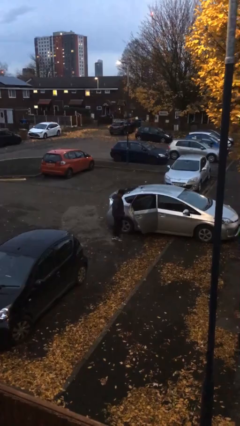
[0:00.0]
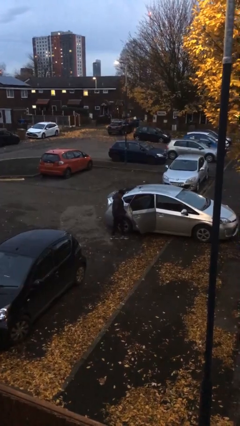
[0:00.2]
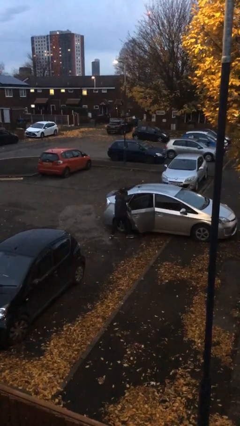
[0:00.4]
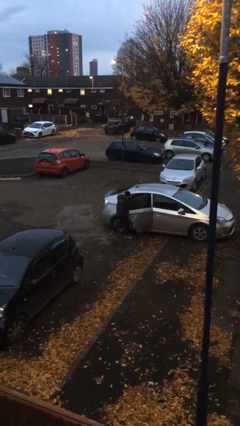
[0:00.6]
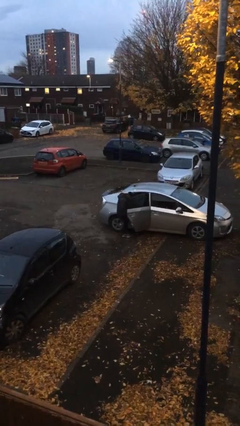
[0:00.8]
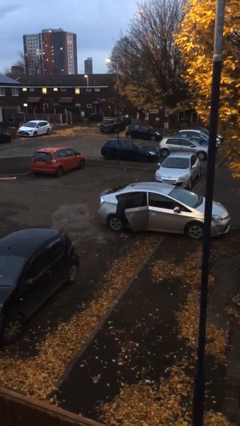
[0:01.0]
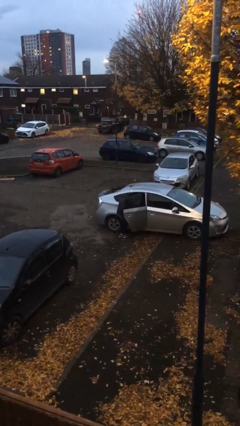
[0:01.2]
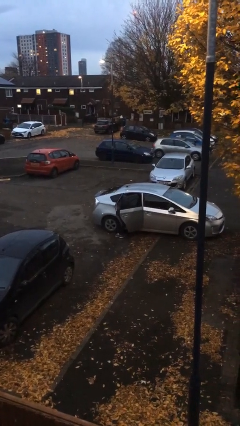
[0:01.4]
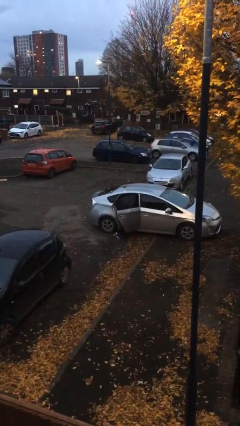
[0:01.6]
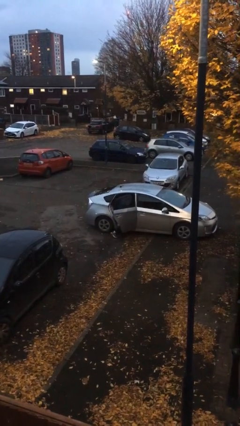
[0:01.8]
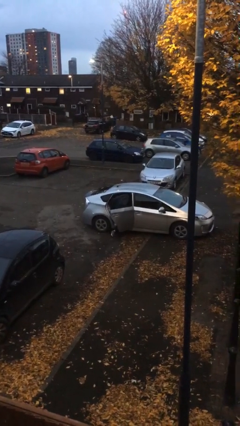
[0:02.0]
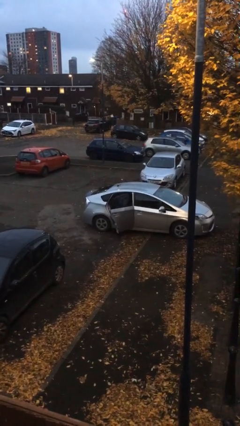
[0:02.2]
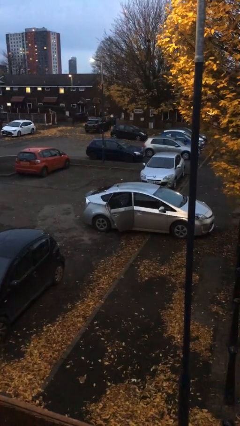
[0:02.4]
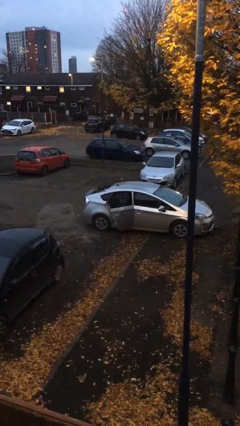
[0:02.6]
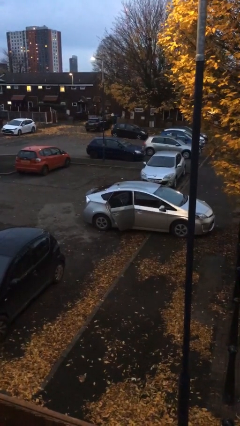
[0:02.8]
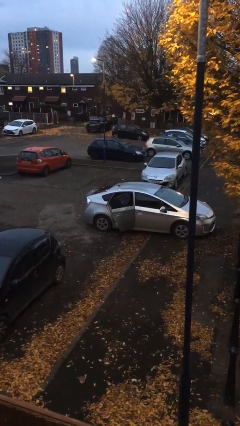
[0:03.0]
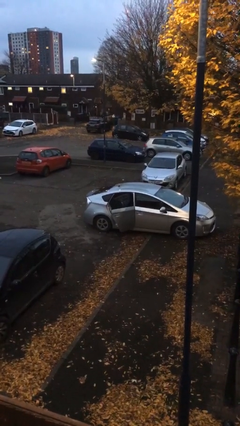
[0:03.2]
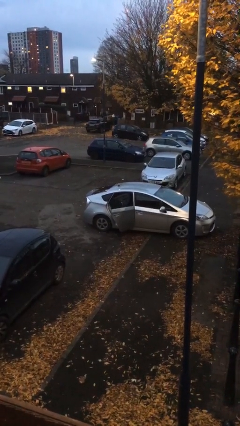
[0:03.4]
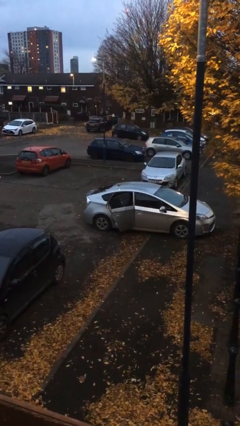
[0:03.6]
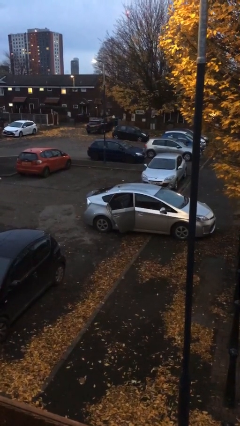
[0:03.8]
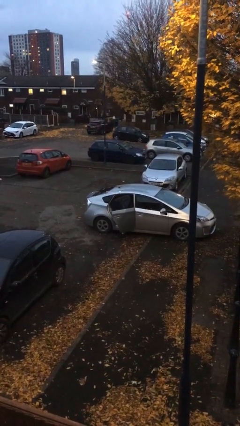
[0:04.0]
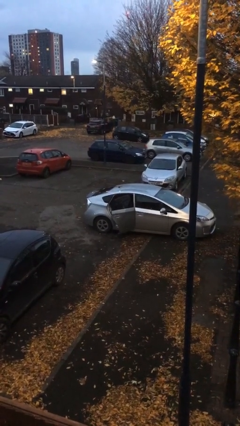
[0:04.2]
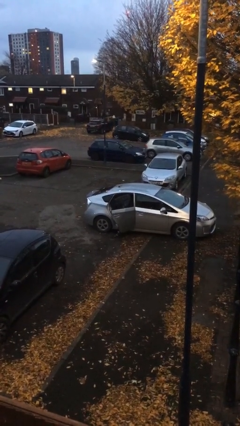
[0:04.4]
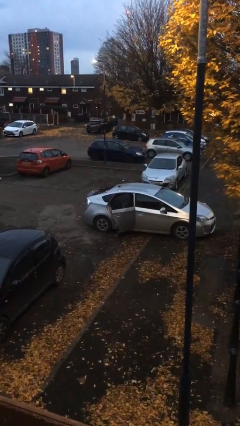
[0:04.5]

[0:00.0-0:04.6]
person enters car

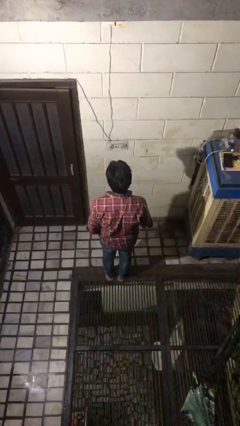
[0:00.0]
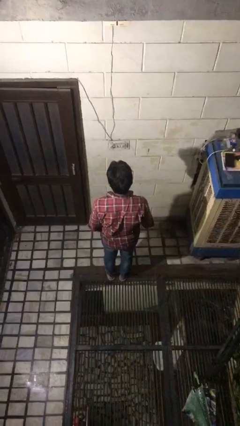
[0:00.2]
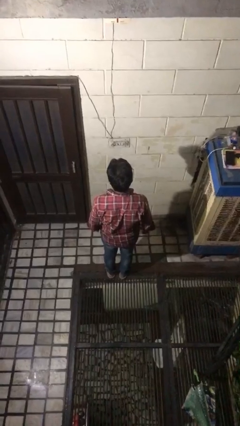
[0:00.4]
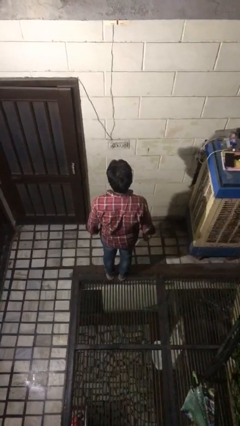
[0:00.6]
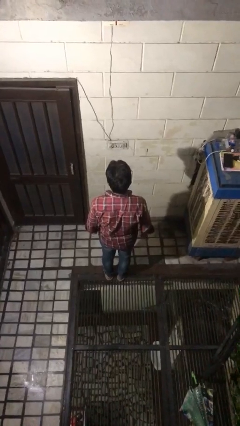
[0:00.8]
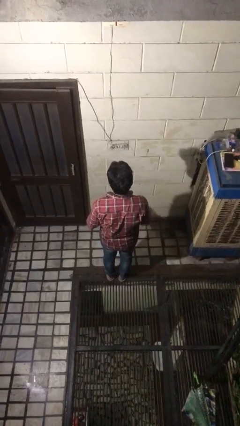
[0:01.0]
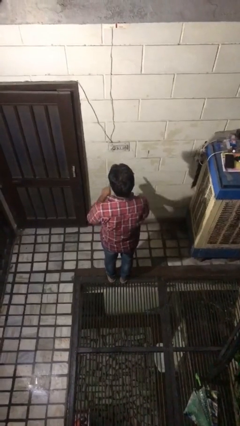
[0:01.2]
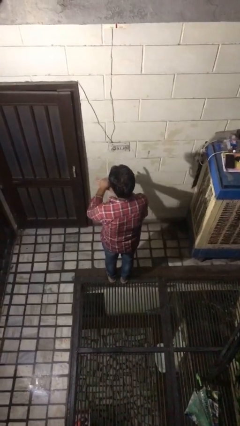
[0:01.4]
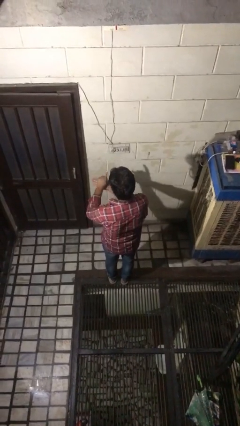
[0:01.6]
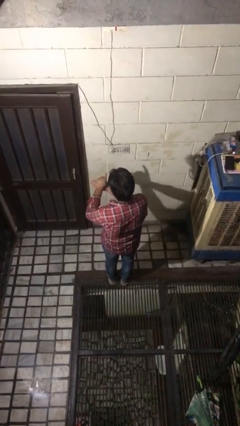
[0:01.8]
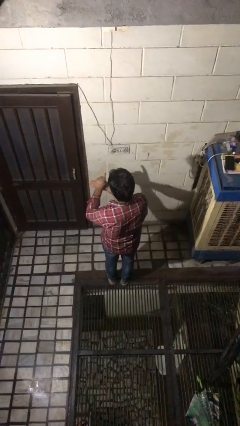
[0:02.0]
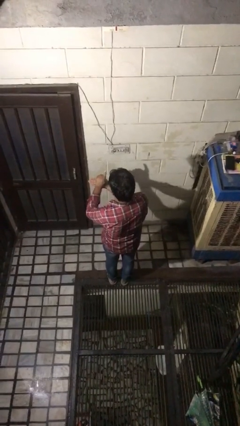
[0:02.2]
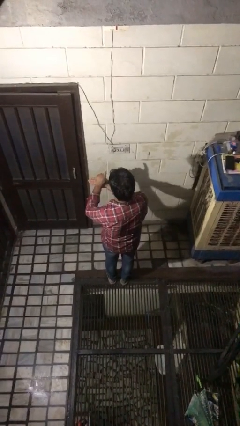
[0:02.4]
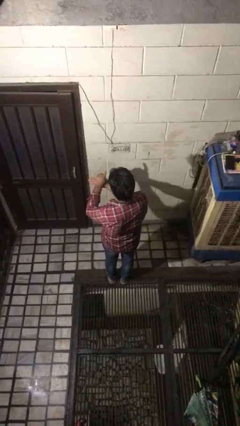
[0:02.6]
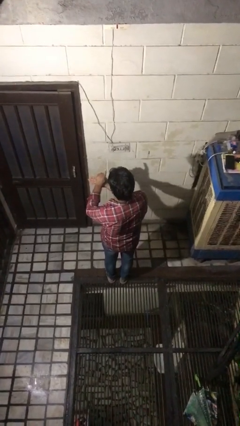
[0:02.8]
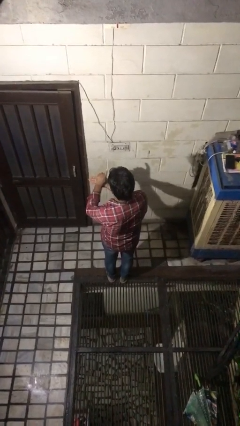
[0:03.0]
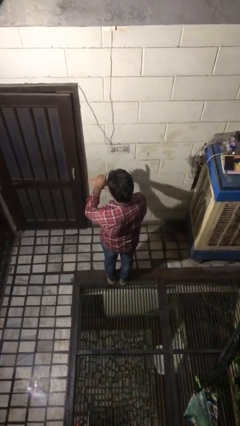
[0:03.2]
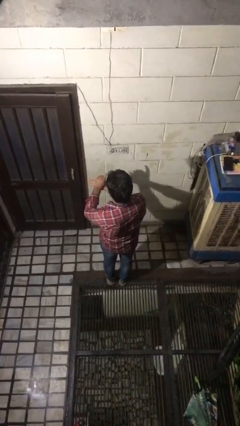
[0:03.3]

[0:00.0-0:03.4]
person gestures number one

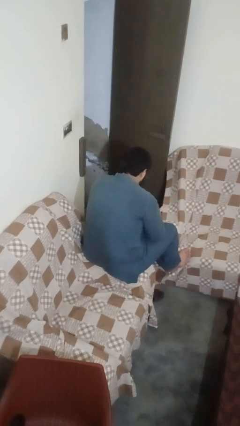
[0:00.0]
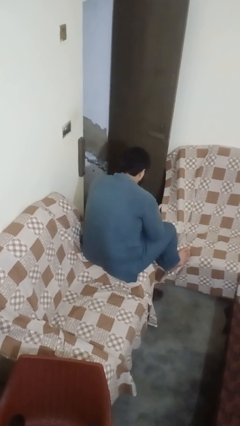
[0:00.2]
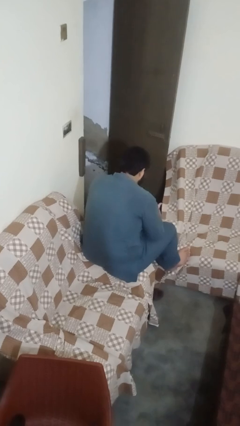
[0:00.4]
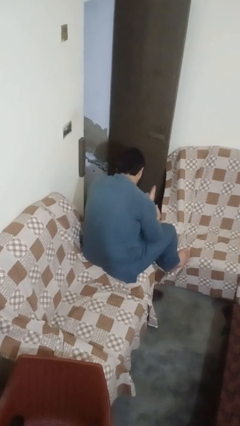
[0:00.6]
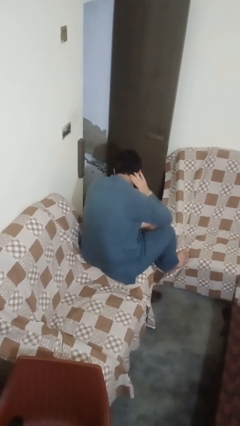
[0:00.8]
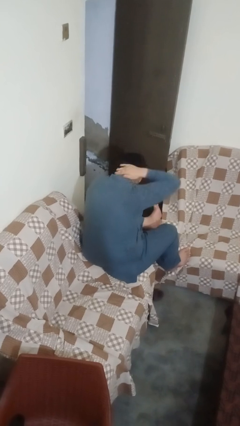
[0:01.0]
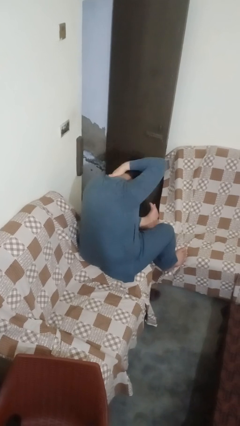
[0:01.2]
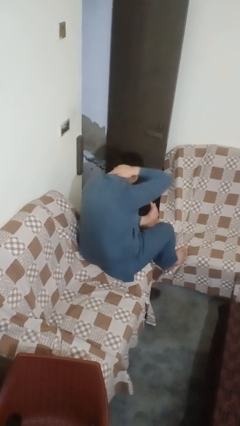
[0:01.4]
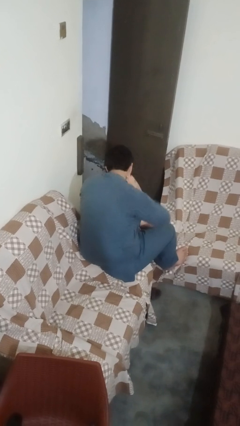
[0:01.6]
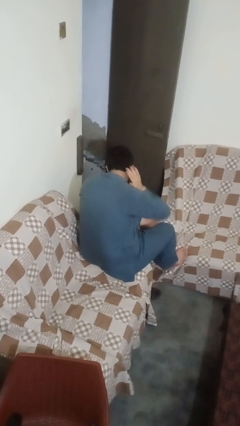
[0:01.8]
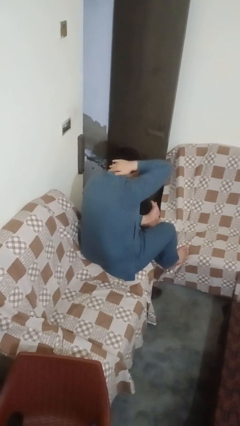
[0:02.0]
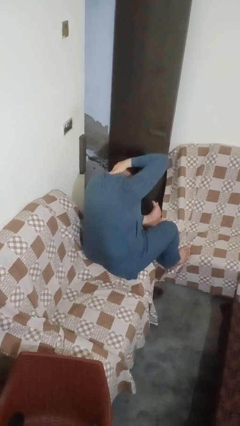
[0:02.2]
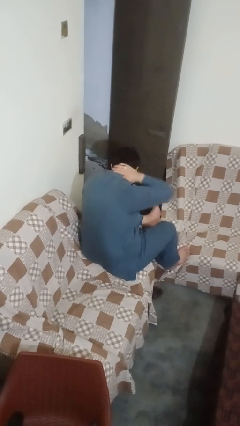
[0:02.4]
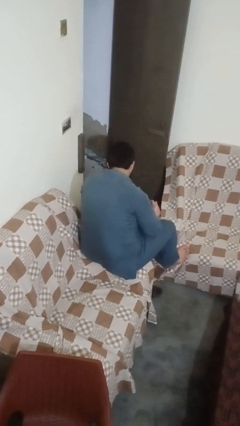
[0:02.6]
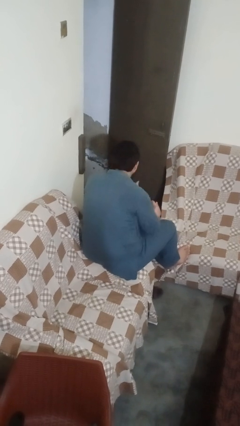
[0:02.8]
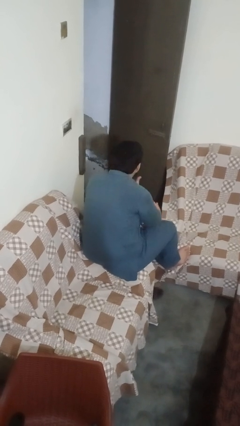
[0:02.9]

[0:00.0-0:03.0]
person rubs neck

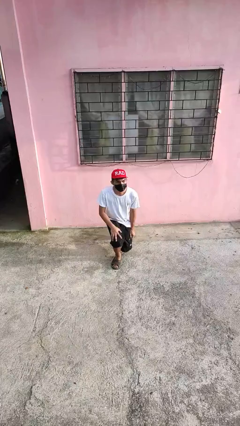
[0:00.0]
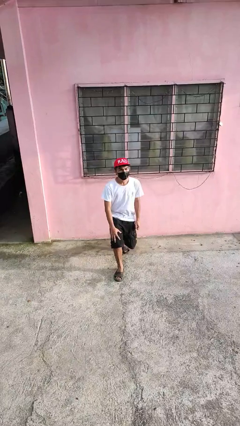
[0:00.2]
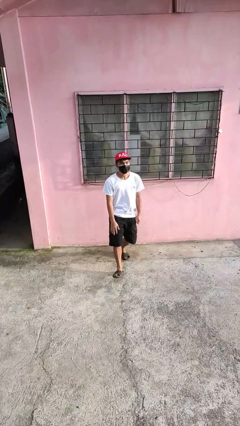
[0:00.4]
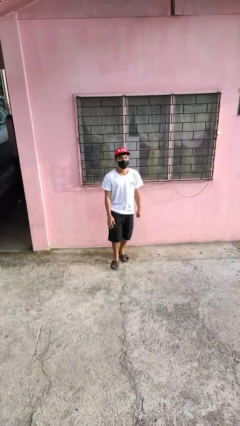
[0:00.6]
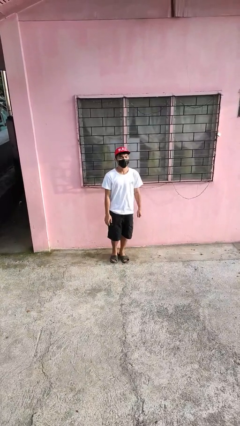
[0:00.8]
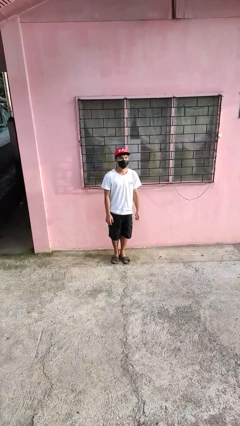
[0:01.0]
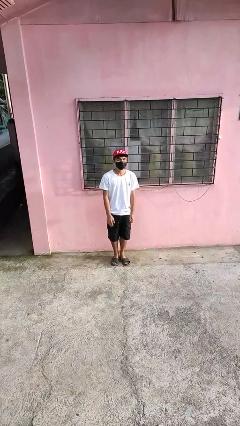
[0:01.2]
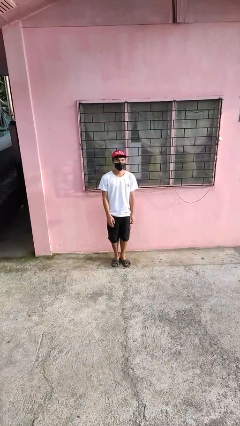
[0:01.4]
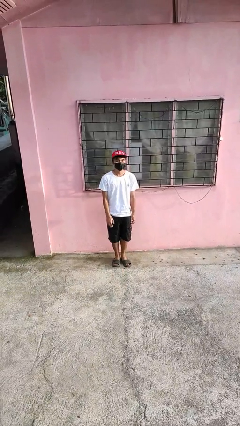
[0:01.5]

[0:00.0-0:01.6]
person stands up from floor

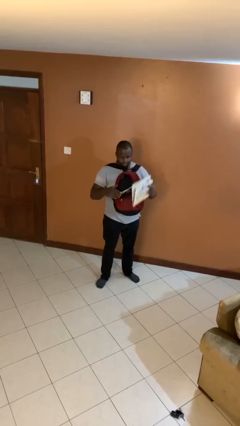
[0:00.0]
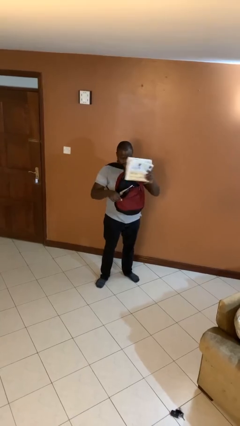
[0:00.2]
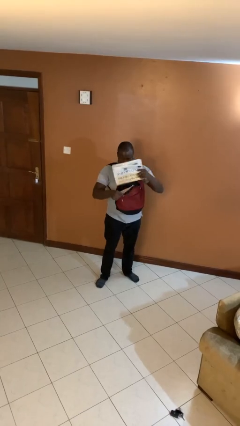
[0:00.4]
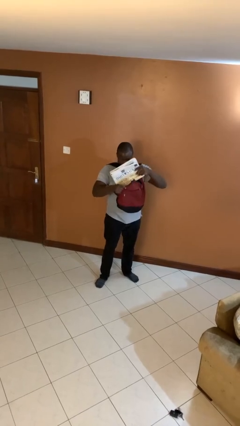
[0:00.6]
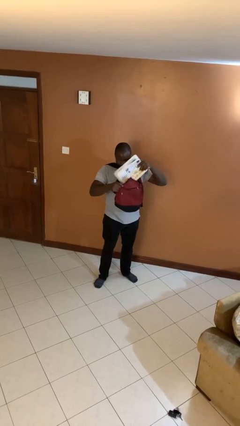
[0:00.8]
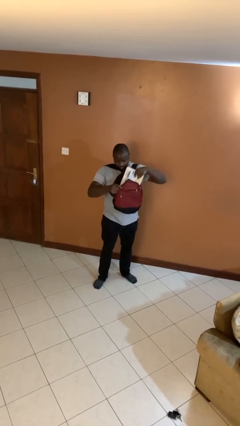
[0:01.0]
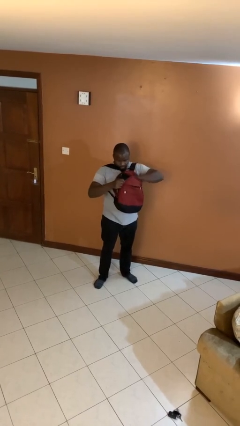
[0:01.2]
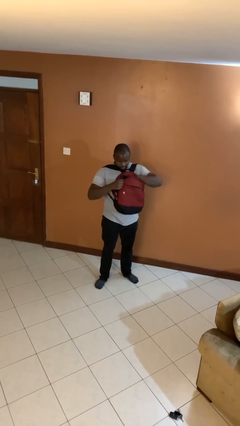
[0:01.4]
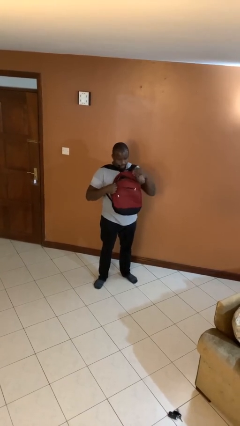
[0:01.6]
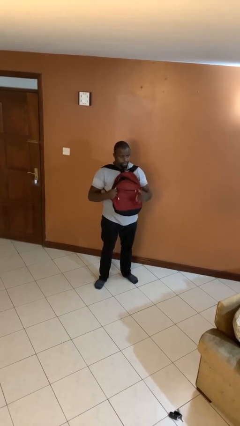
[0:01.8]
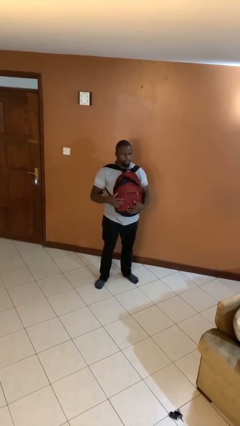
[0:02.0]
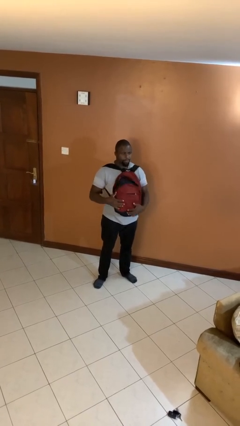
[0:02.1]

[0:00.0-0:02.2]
person puts object into backpack

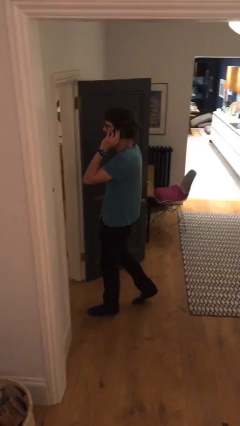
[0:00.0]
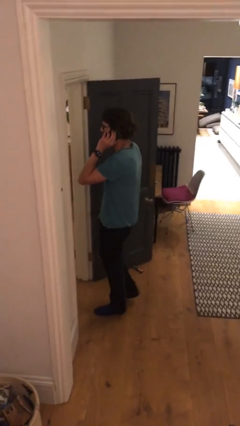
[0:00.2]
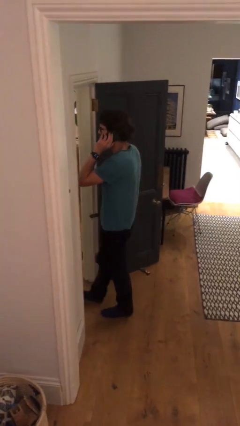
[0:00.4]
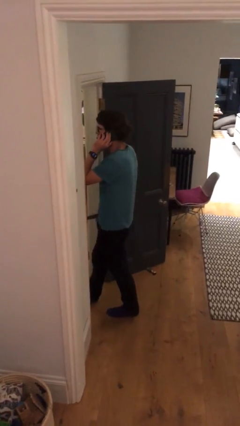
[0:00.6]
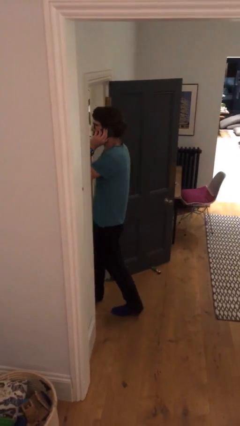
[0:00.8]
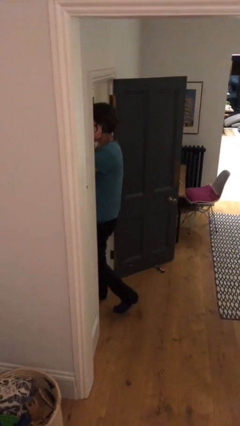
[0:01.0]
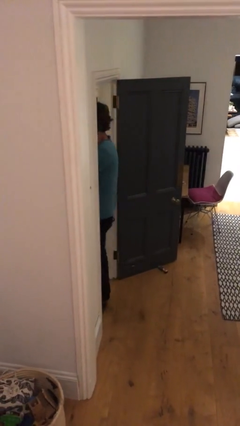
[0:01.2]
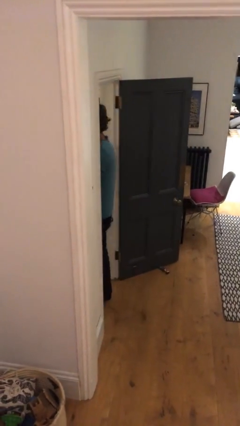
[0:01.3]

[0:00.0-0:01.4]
person exits scene through structure

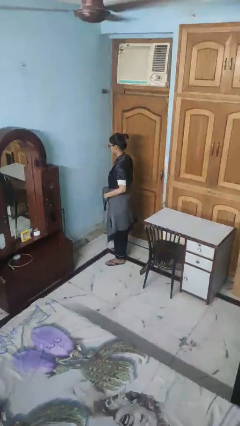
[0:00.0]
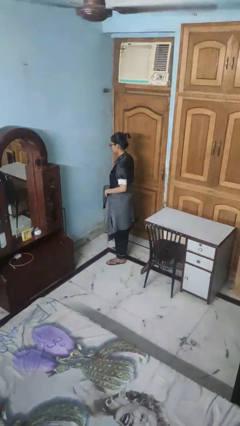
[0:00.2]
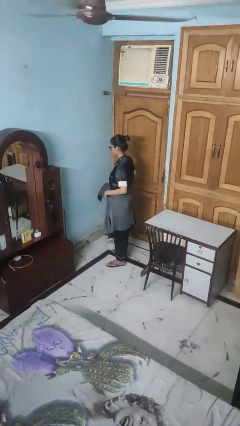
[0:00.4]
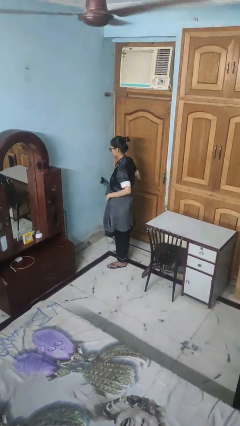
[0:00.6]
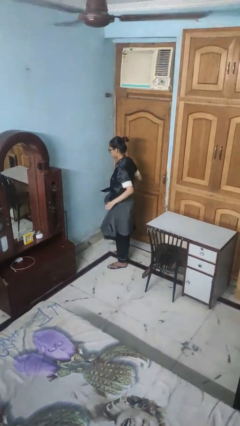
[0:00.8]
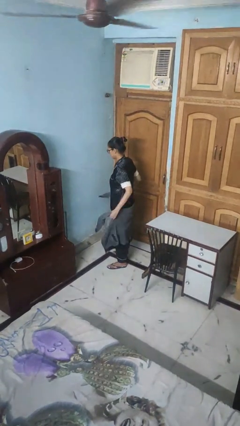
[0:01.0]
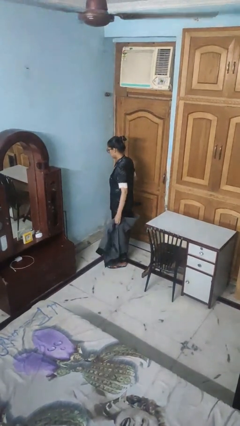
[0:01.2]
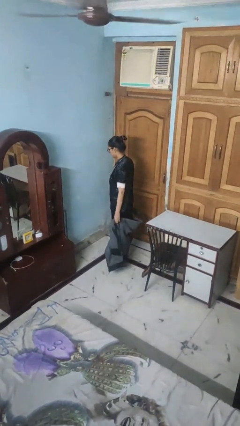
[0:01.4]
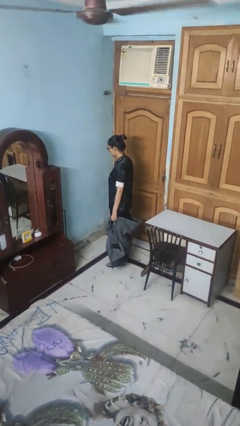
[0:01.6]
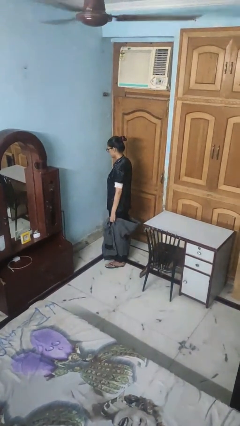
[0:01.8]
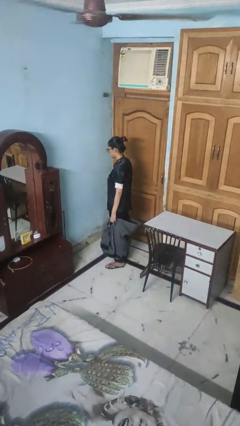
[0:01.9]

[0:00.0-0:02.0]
person unties jacket around waist
